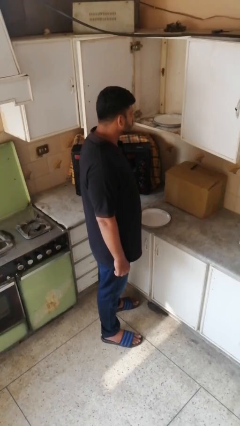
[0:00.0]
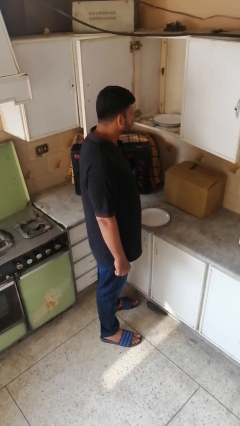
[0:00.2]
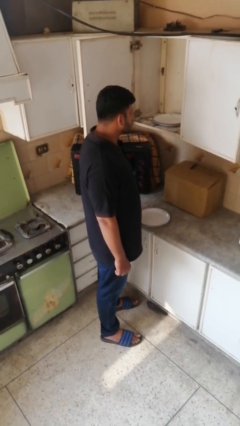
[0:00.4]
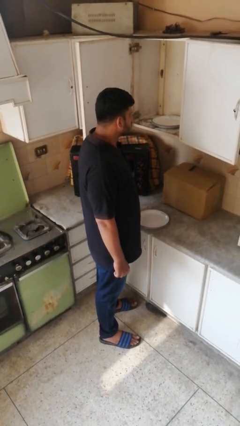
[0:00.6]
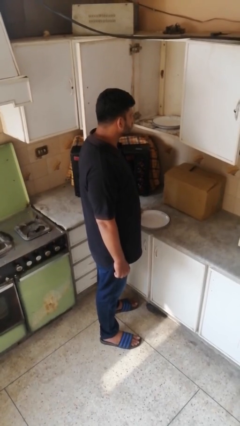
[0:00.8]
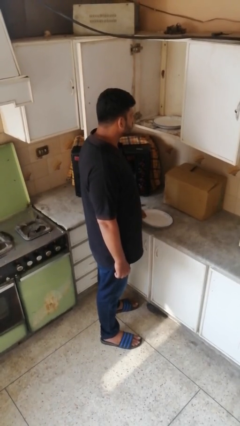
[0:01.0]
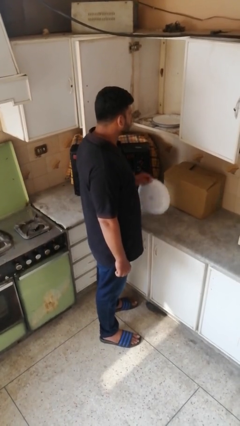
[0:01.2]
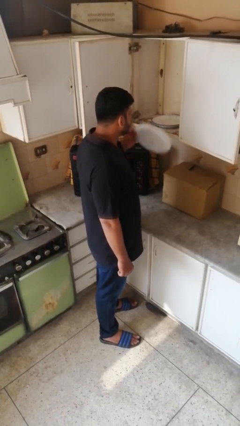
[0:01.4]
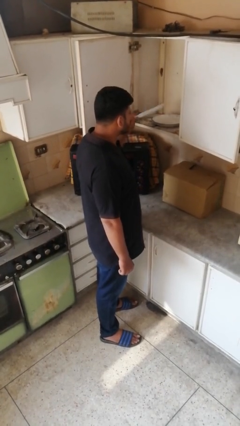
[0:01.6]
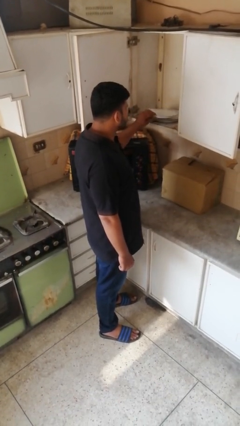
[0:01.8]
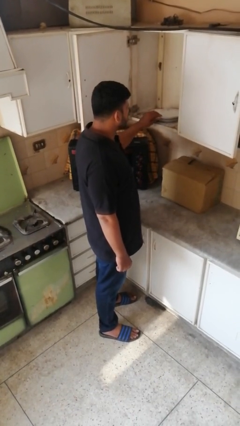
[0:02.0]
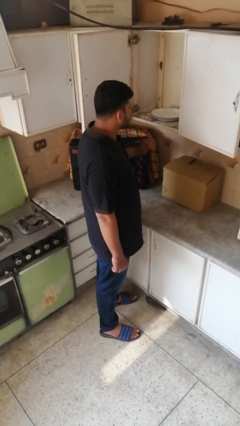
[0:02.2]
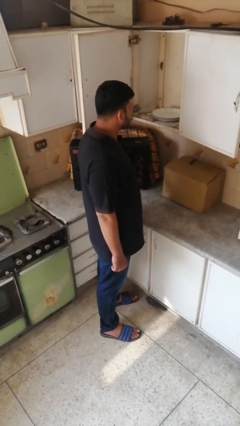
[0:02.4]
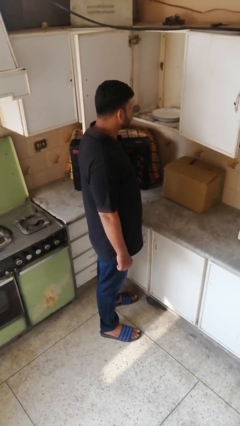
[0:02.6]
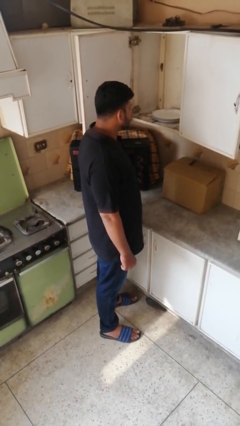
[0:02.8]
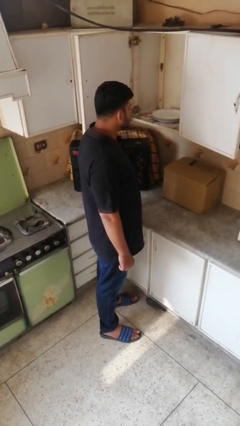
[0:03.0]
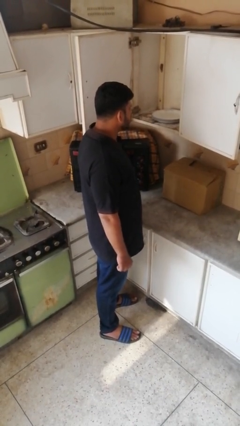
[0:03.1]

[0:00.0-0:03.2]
person puts object in cabinet

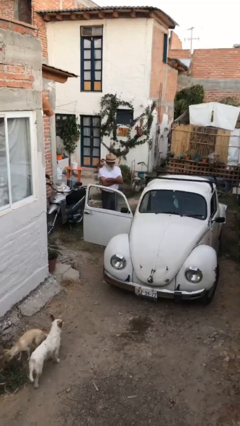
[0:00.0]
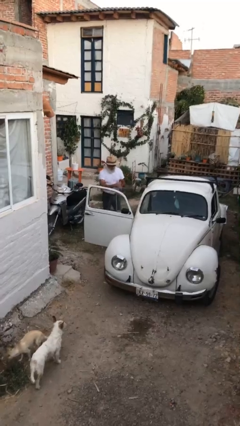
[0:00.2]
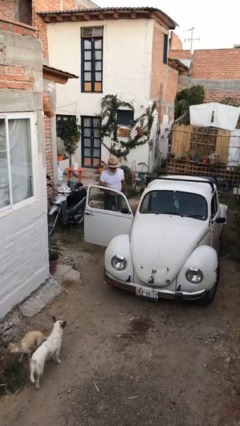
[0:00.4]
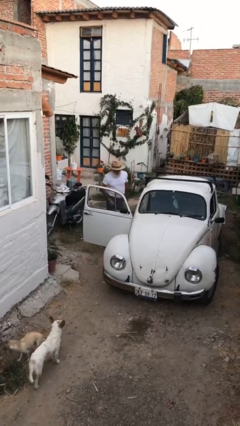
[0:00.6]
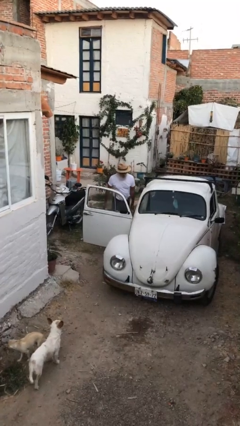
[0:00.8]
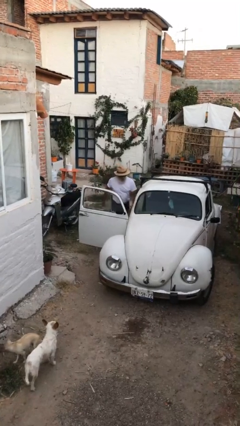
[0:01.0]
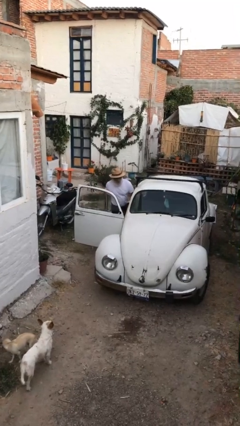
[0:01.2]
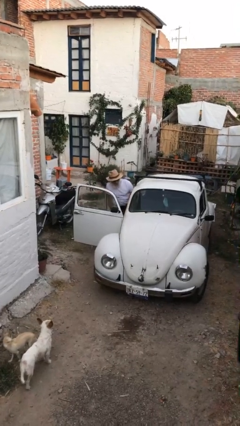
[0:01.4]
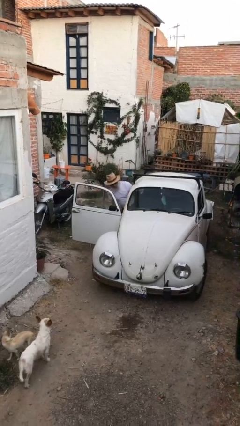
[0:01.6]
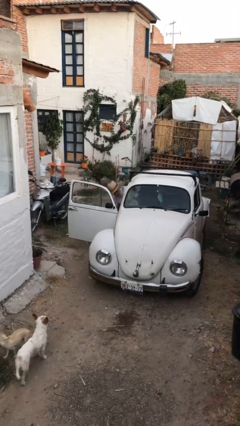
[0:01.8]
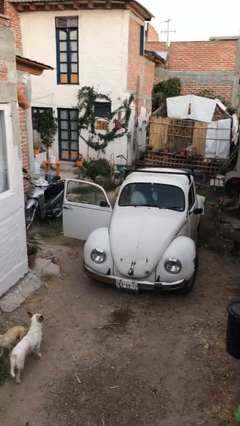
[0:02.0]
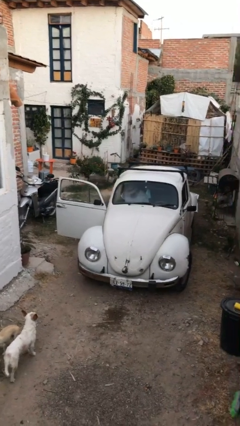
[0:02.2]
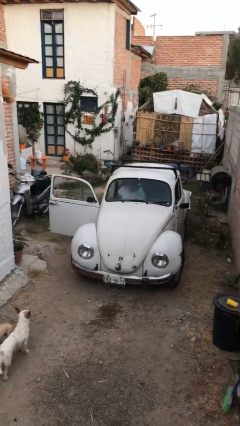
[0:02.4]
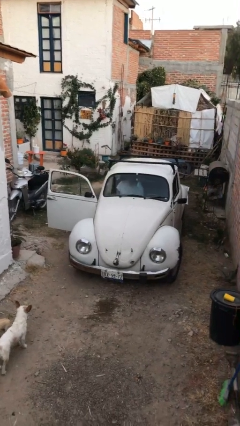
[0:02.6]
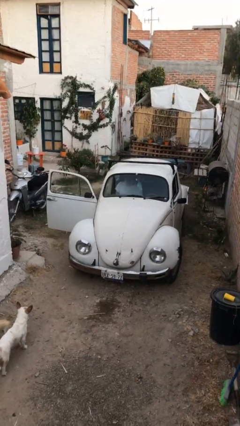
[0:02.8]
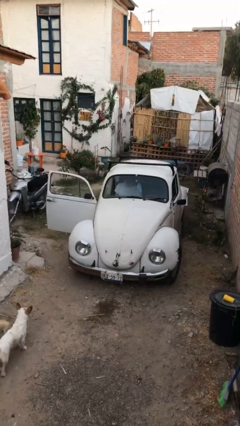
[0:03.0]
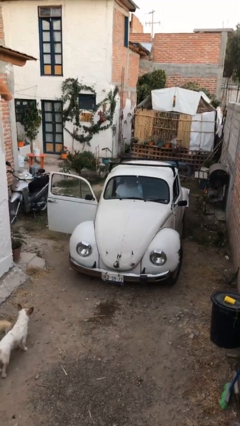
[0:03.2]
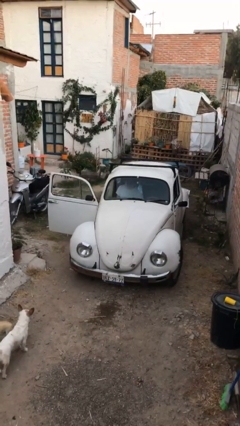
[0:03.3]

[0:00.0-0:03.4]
person enters car

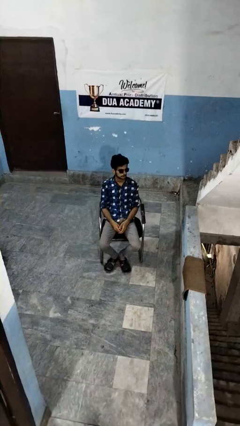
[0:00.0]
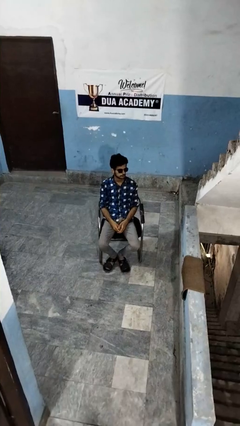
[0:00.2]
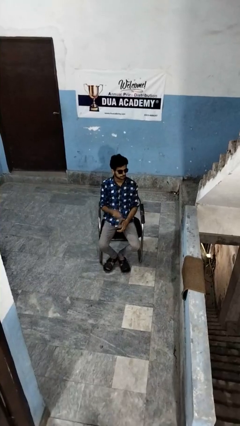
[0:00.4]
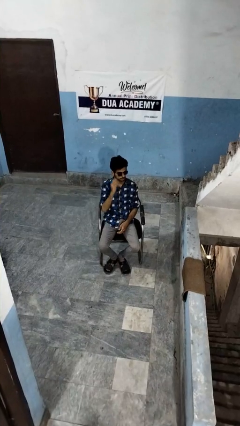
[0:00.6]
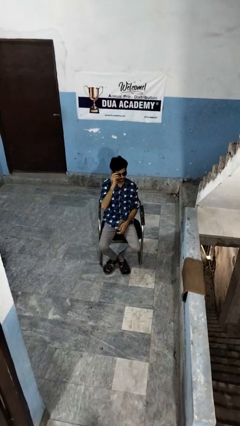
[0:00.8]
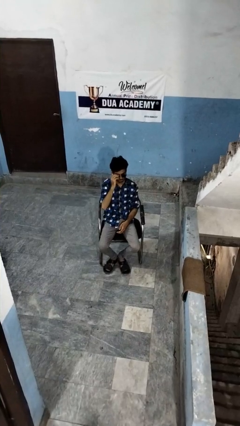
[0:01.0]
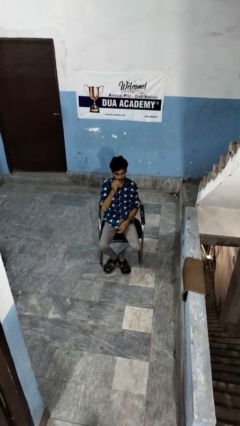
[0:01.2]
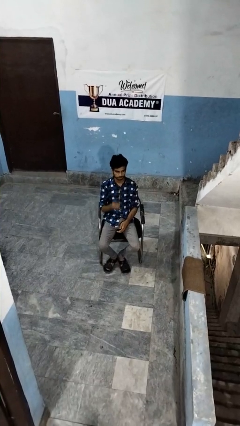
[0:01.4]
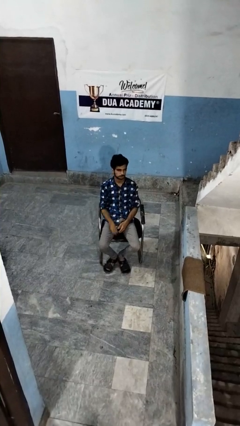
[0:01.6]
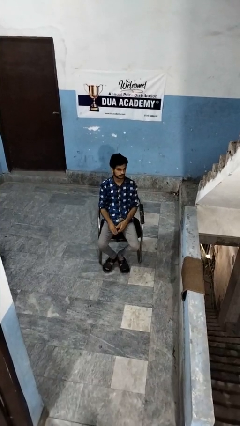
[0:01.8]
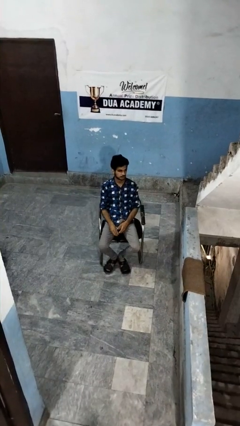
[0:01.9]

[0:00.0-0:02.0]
person takes off sunglasses

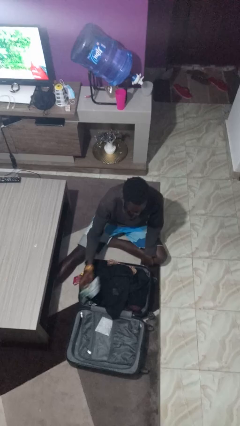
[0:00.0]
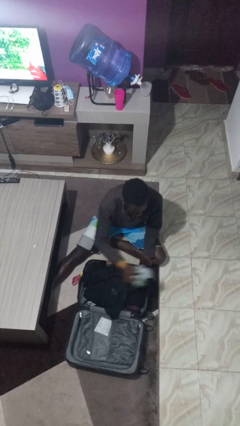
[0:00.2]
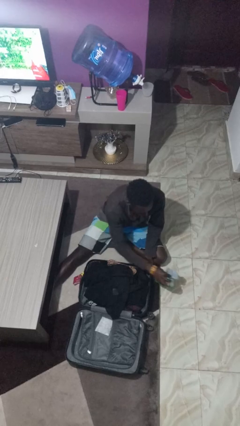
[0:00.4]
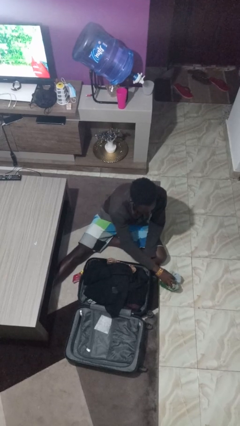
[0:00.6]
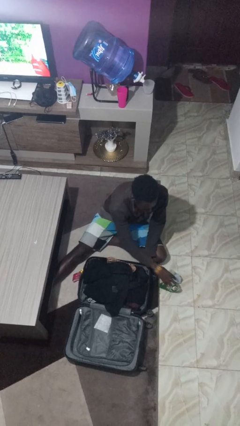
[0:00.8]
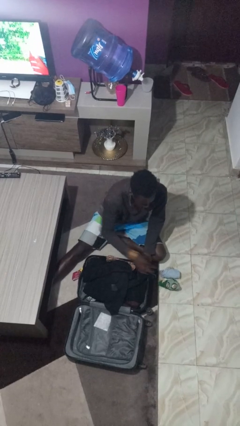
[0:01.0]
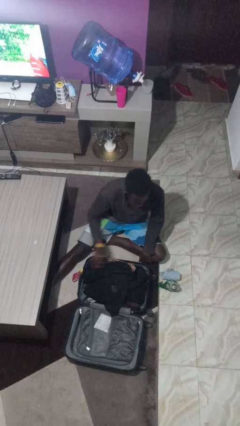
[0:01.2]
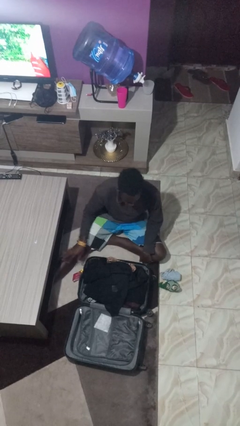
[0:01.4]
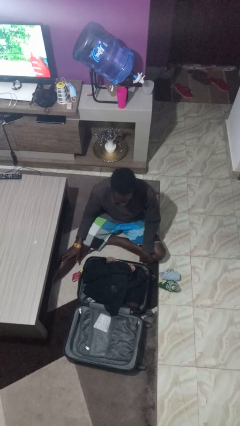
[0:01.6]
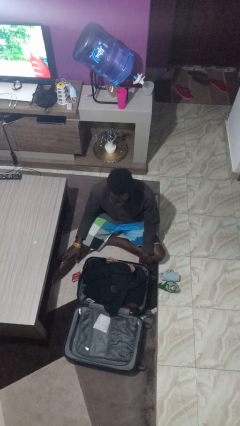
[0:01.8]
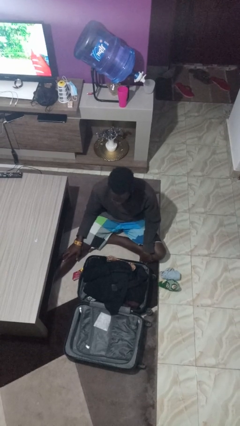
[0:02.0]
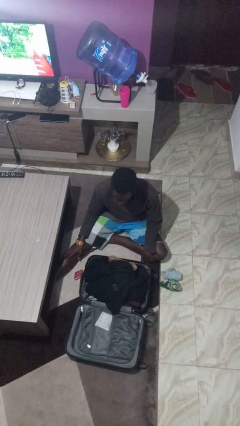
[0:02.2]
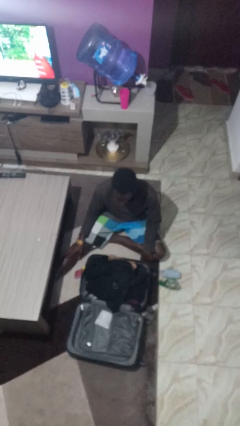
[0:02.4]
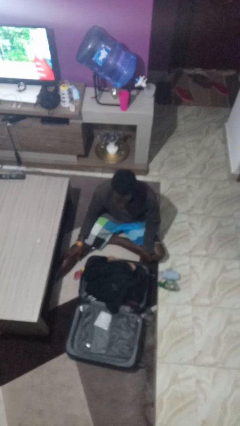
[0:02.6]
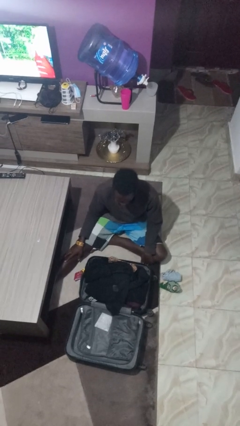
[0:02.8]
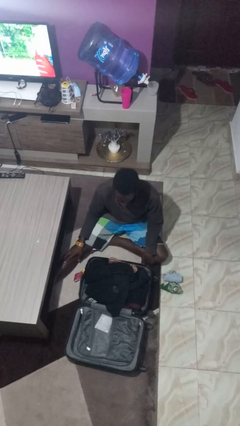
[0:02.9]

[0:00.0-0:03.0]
person unloads clothes from suitcase

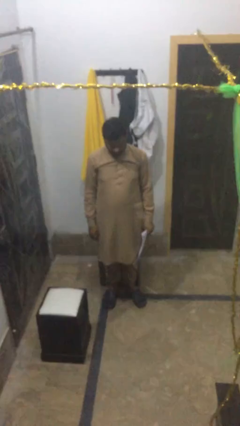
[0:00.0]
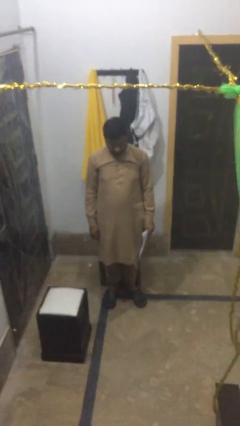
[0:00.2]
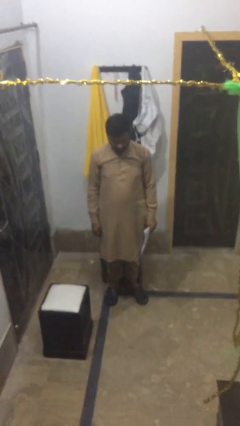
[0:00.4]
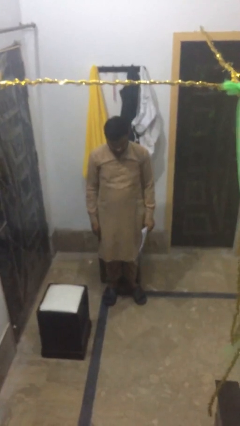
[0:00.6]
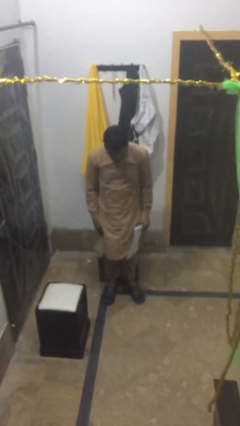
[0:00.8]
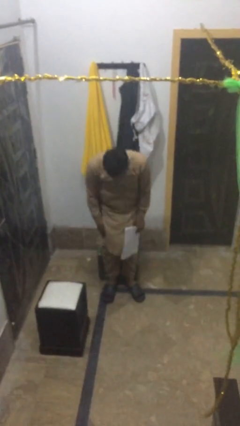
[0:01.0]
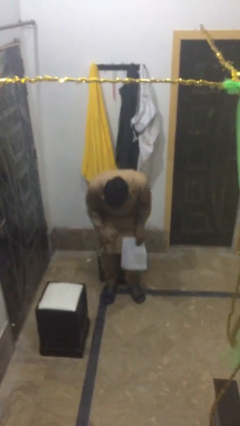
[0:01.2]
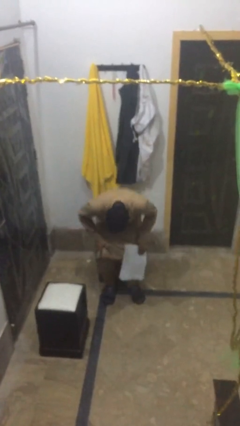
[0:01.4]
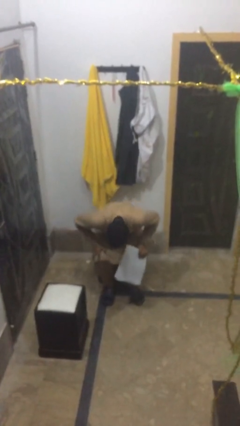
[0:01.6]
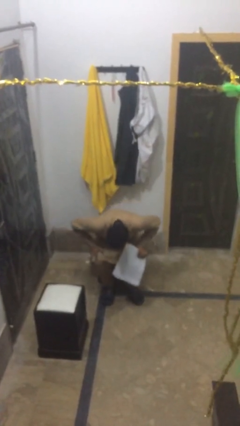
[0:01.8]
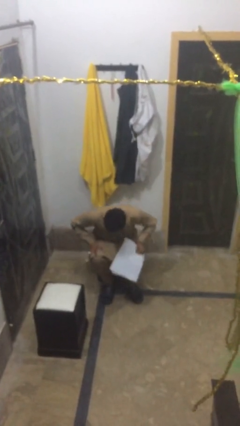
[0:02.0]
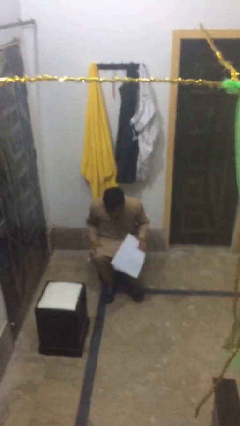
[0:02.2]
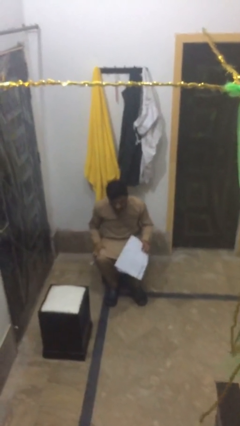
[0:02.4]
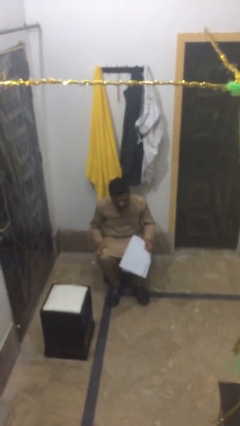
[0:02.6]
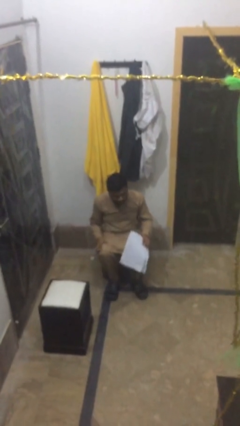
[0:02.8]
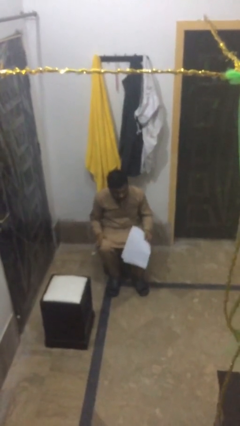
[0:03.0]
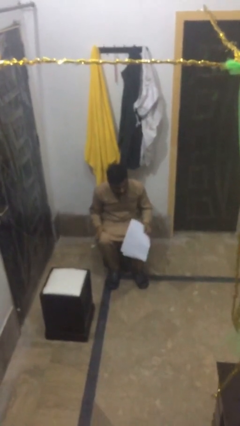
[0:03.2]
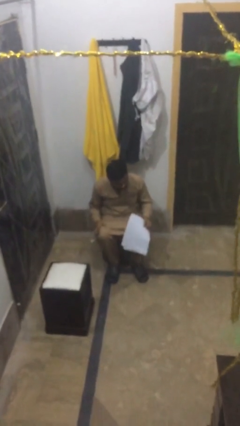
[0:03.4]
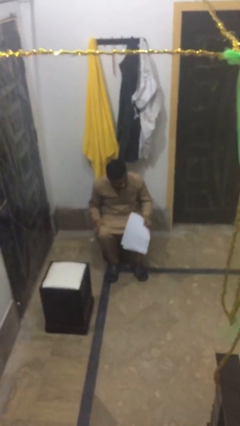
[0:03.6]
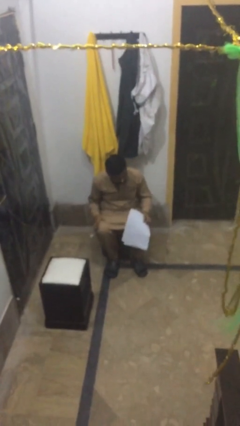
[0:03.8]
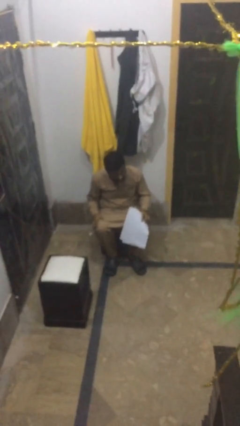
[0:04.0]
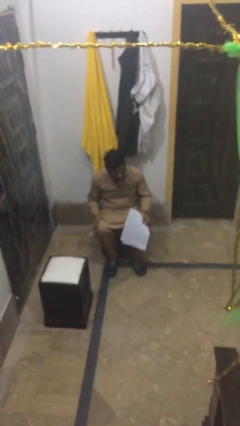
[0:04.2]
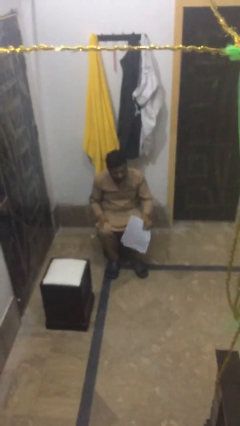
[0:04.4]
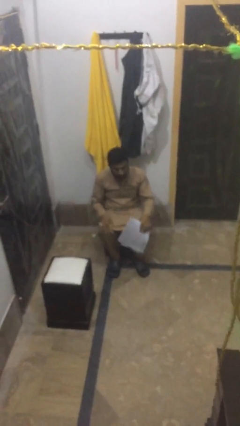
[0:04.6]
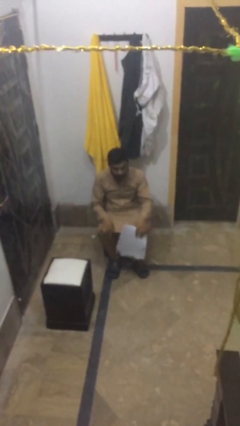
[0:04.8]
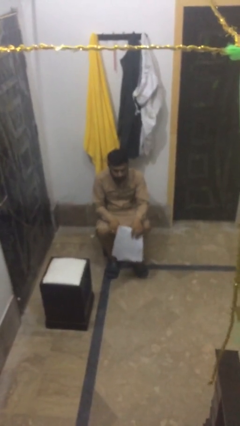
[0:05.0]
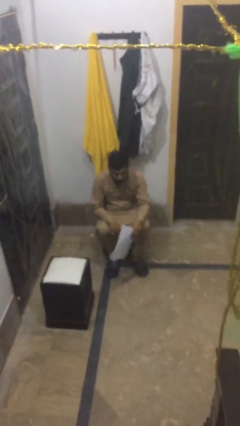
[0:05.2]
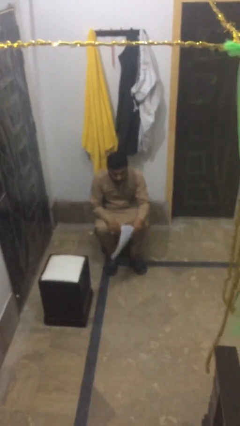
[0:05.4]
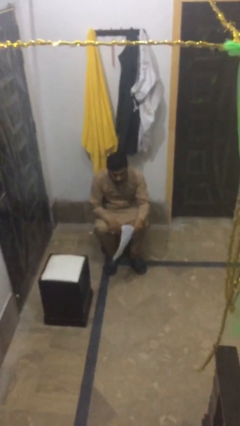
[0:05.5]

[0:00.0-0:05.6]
person sits down

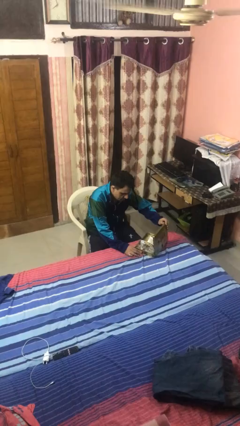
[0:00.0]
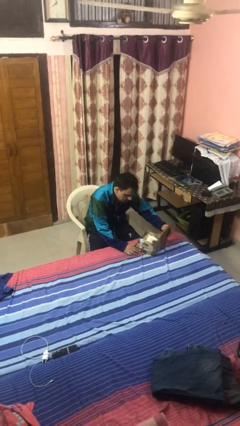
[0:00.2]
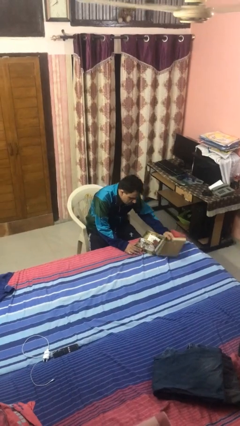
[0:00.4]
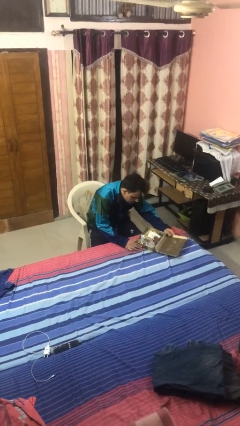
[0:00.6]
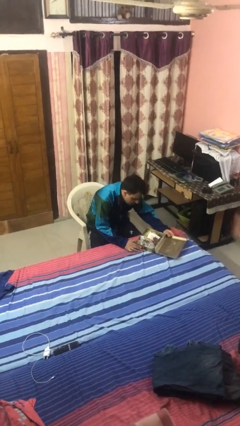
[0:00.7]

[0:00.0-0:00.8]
person opens jewelry box
